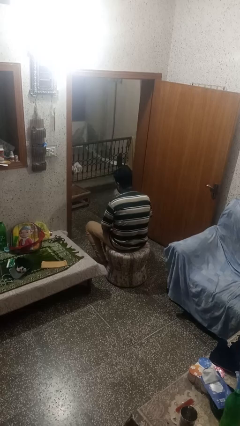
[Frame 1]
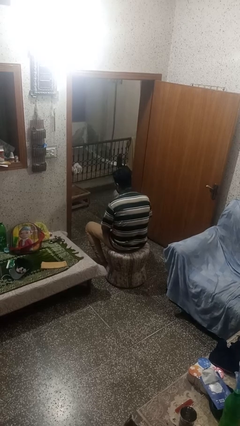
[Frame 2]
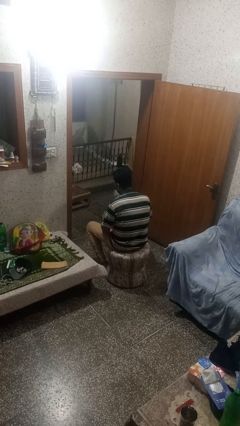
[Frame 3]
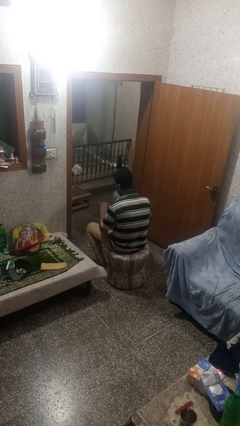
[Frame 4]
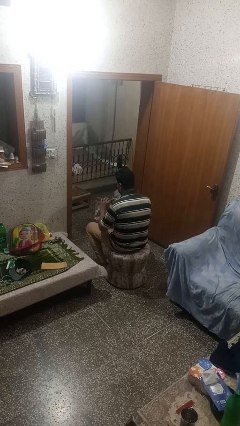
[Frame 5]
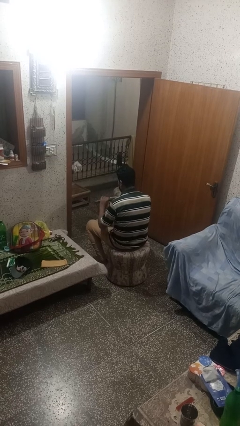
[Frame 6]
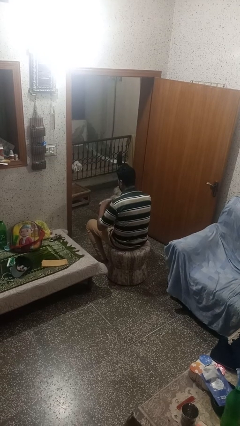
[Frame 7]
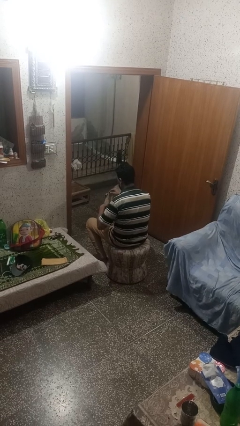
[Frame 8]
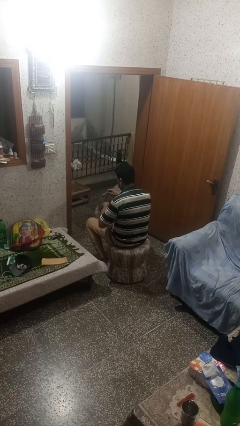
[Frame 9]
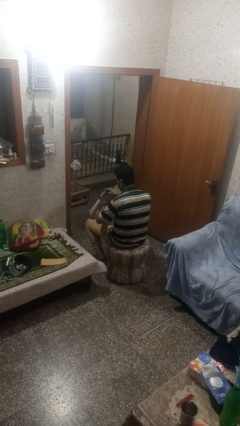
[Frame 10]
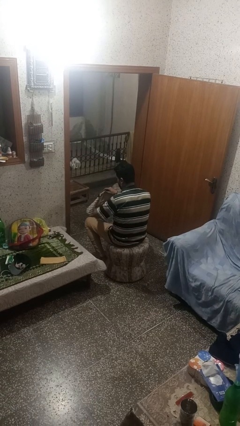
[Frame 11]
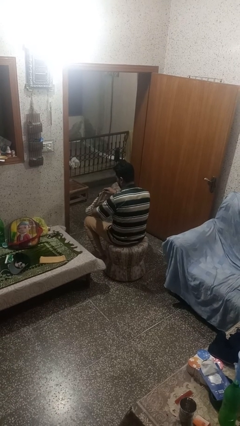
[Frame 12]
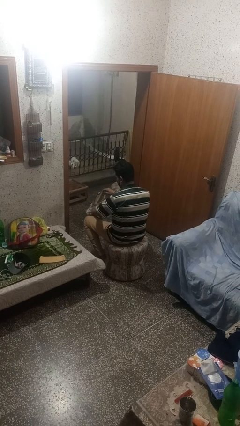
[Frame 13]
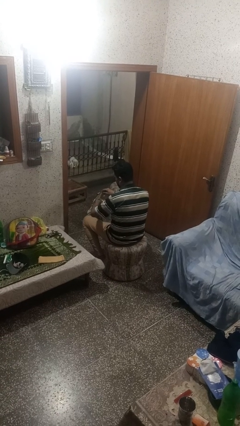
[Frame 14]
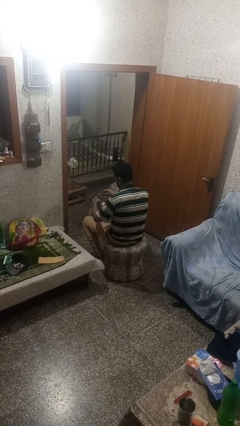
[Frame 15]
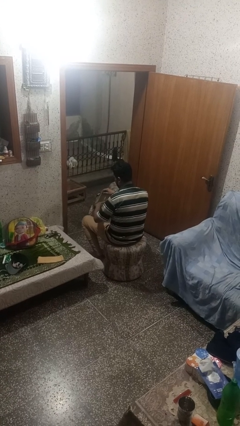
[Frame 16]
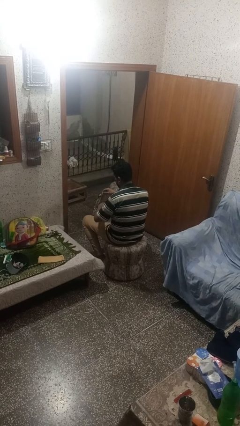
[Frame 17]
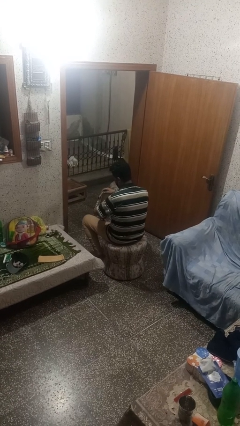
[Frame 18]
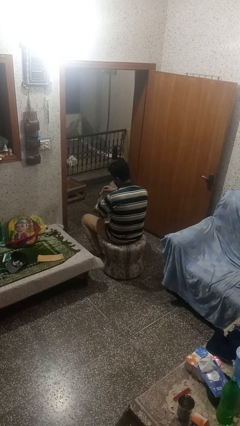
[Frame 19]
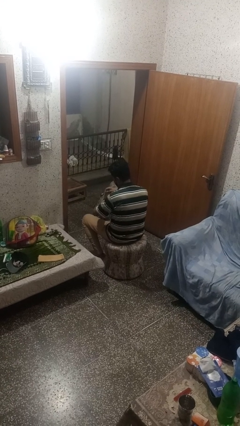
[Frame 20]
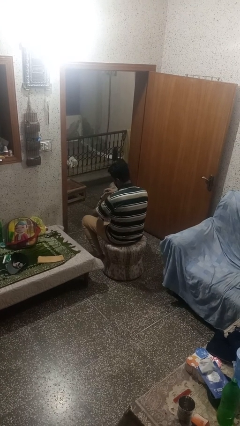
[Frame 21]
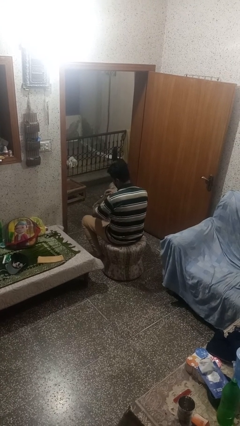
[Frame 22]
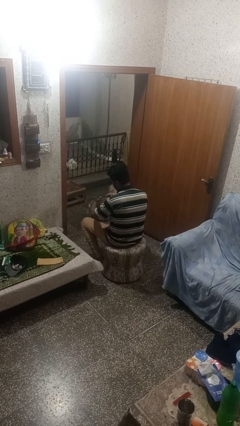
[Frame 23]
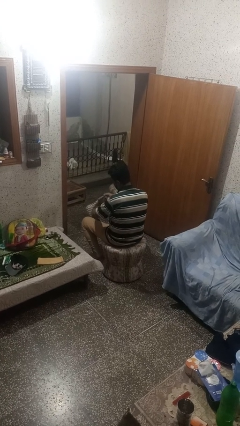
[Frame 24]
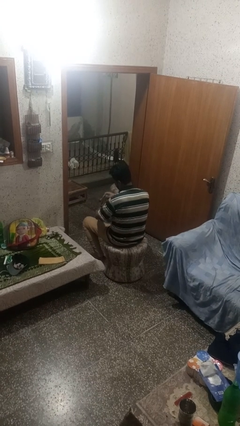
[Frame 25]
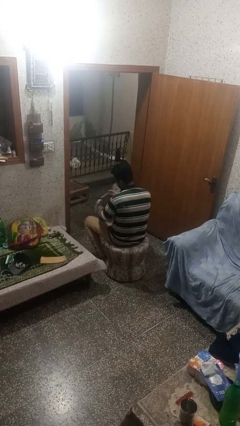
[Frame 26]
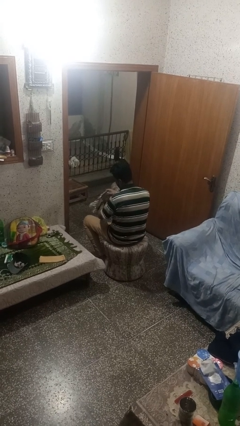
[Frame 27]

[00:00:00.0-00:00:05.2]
person searches in purse

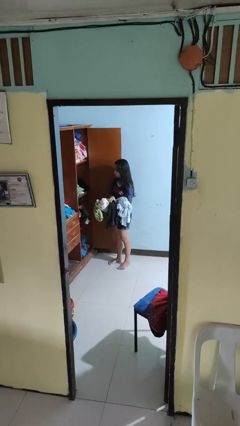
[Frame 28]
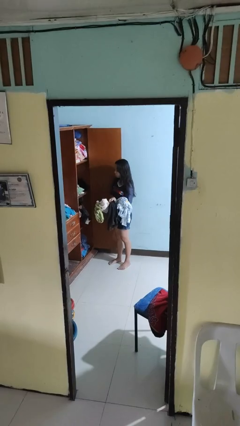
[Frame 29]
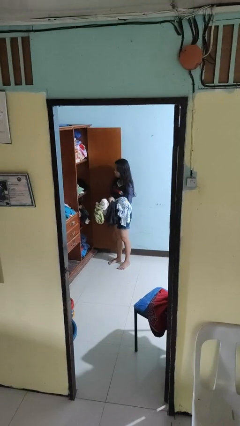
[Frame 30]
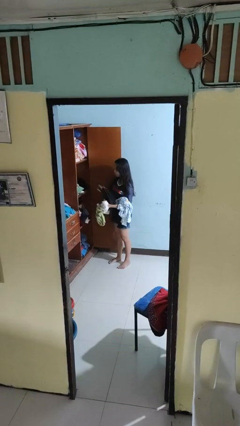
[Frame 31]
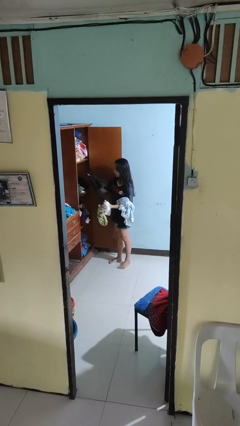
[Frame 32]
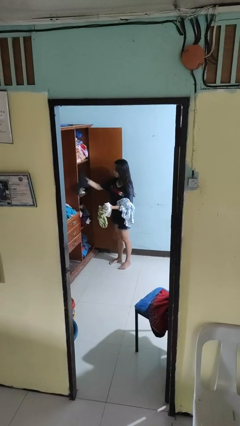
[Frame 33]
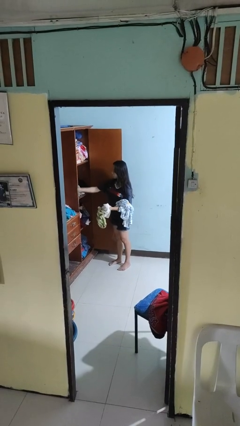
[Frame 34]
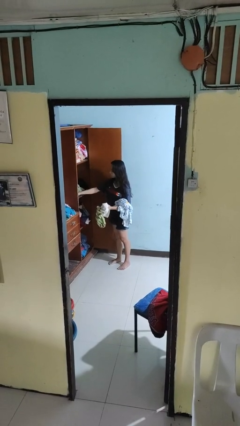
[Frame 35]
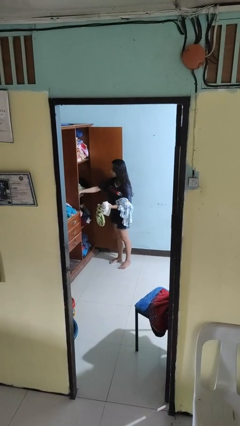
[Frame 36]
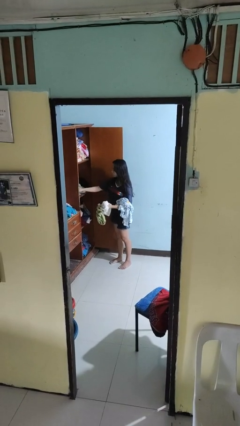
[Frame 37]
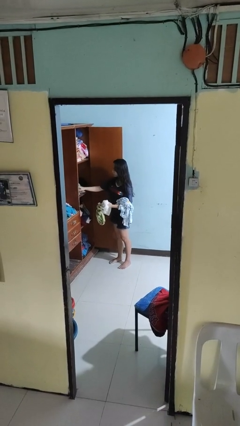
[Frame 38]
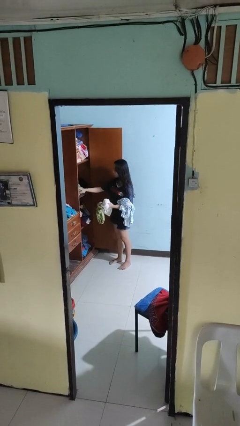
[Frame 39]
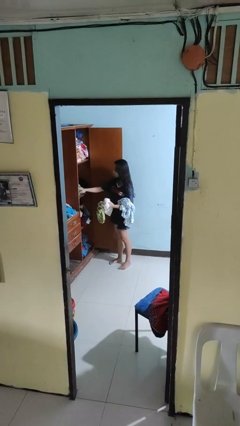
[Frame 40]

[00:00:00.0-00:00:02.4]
person puts clothes into dresser

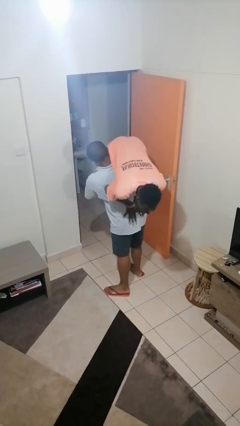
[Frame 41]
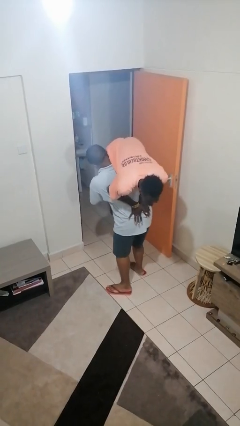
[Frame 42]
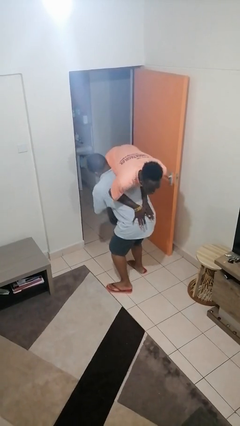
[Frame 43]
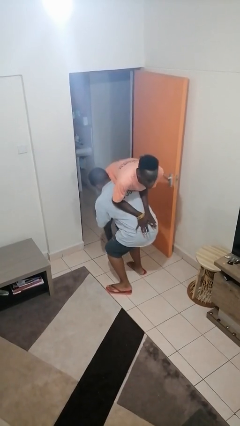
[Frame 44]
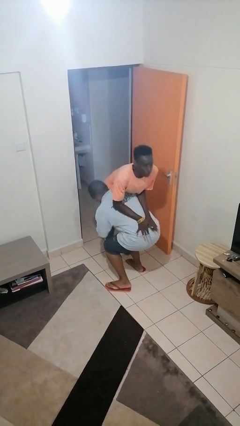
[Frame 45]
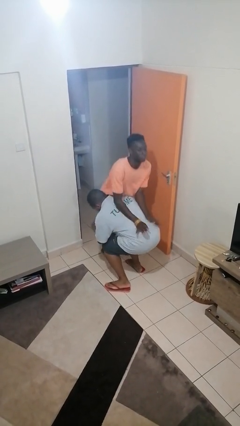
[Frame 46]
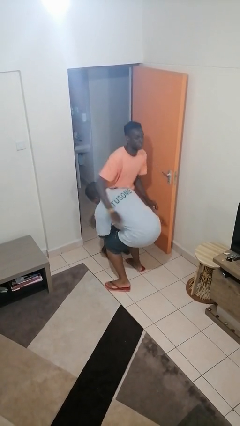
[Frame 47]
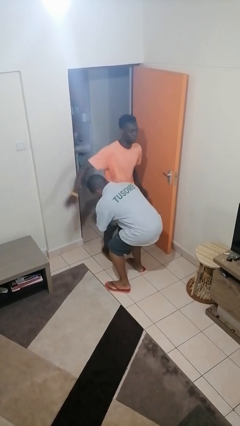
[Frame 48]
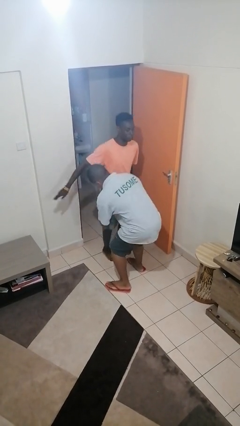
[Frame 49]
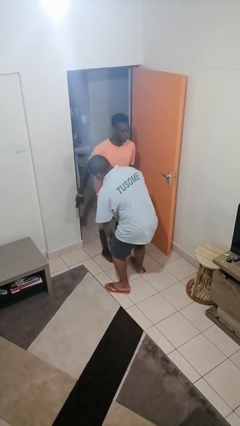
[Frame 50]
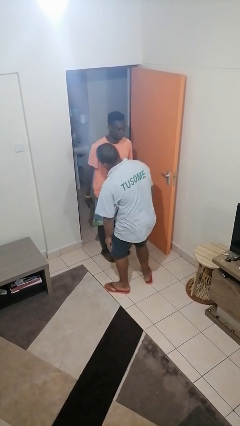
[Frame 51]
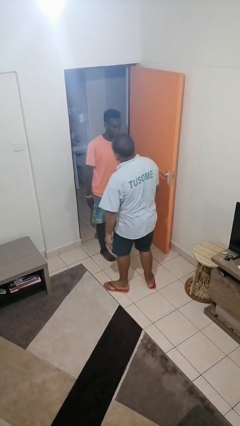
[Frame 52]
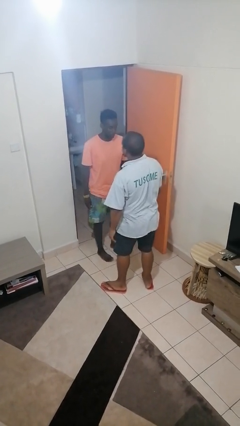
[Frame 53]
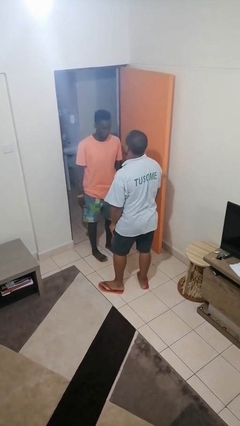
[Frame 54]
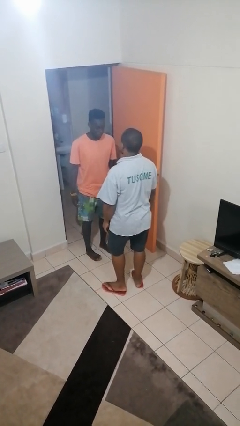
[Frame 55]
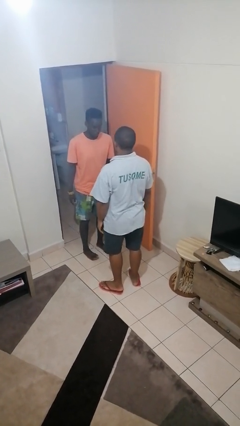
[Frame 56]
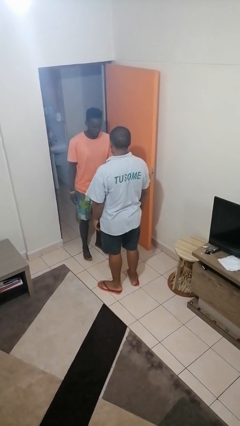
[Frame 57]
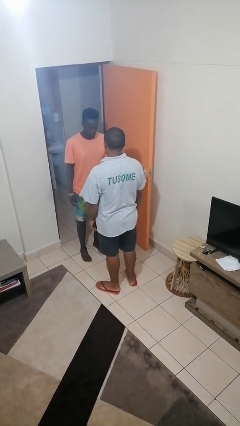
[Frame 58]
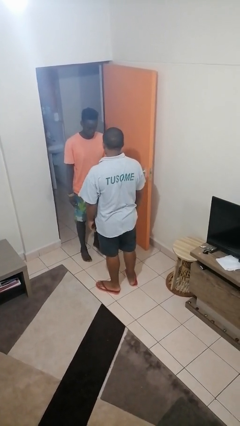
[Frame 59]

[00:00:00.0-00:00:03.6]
person puts down person

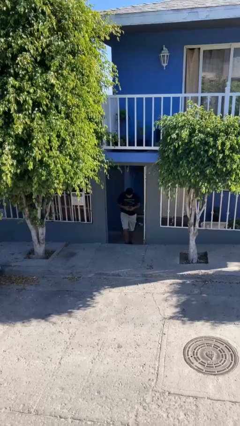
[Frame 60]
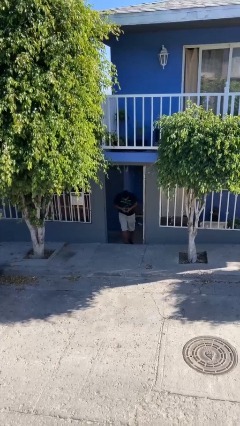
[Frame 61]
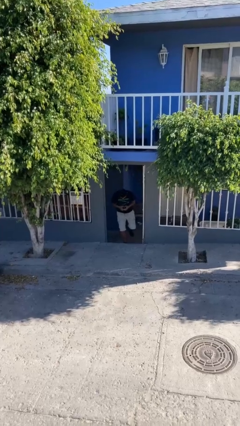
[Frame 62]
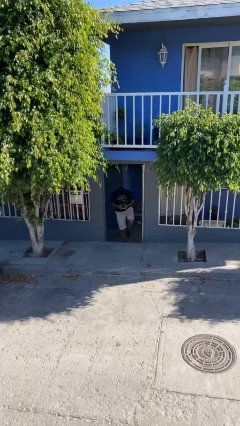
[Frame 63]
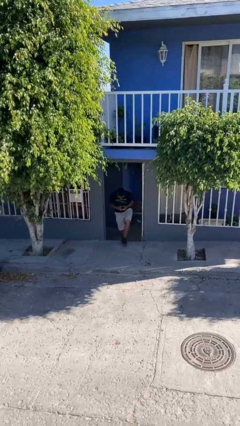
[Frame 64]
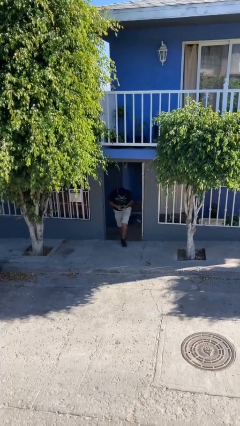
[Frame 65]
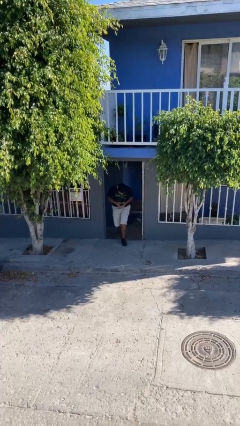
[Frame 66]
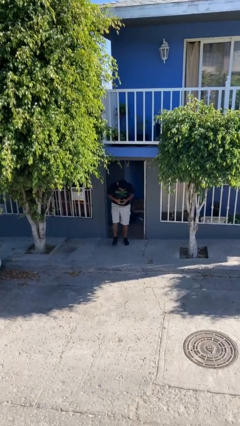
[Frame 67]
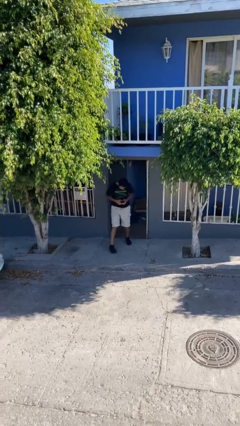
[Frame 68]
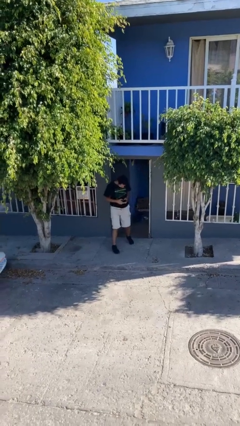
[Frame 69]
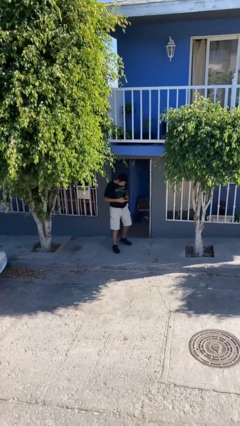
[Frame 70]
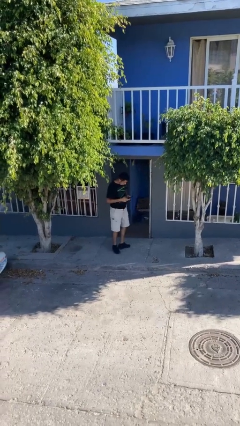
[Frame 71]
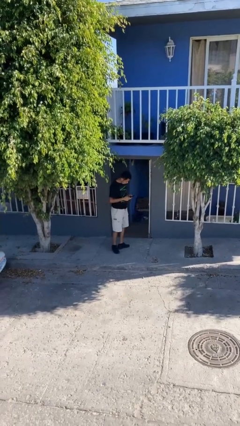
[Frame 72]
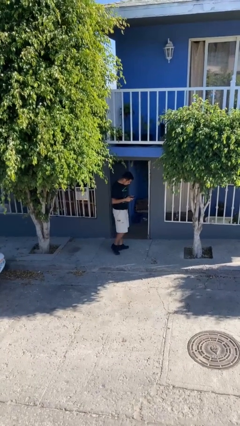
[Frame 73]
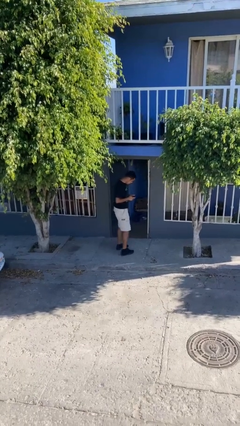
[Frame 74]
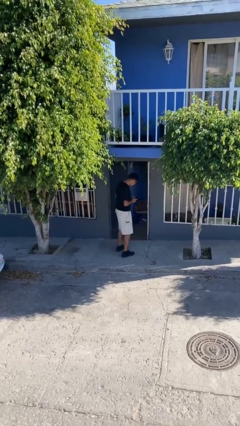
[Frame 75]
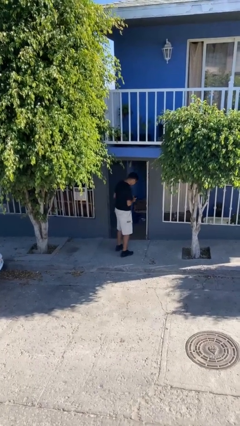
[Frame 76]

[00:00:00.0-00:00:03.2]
person enters scene through structure

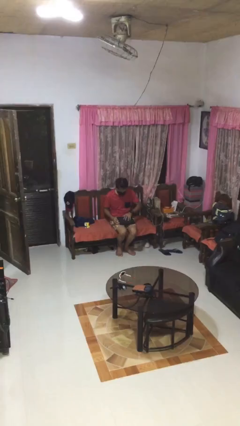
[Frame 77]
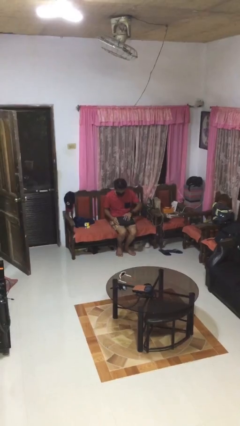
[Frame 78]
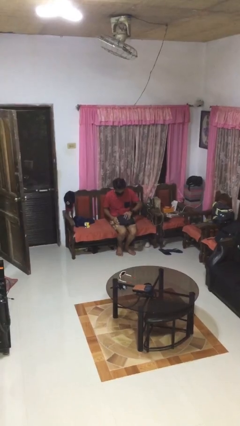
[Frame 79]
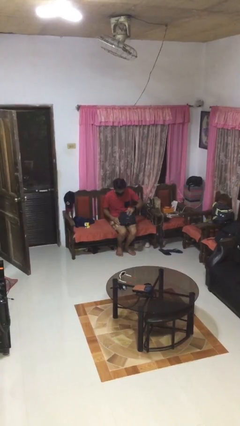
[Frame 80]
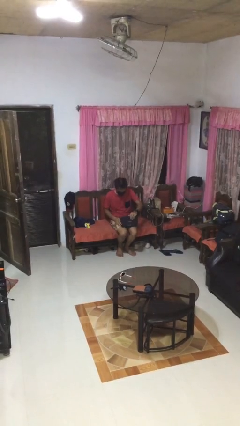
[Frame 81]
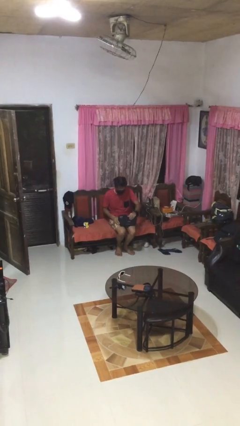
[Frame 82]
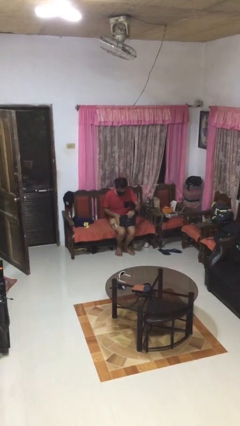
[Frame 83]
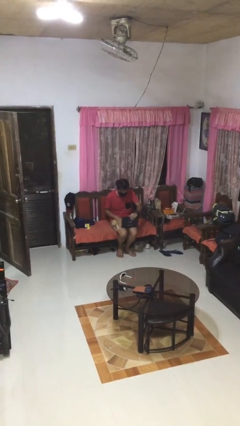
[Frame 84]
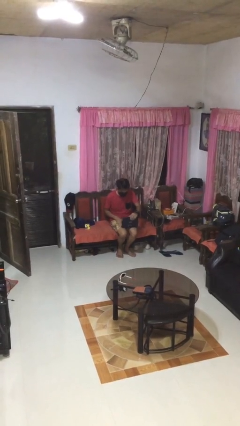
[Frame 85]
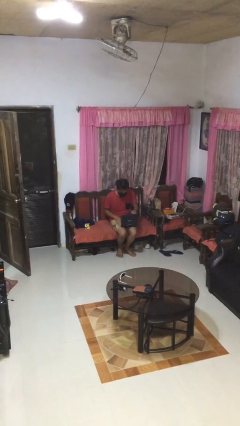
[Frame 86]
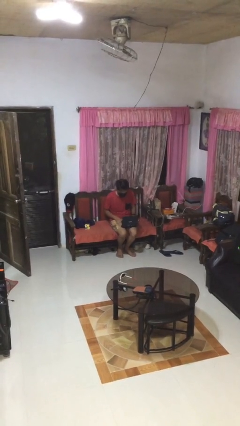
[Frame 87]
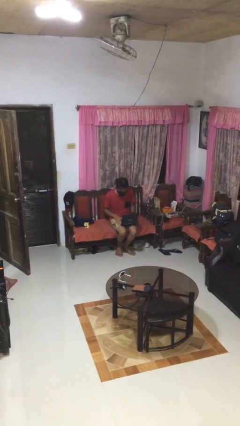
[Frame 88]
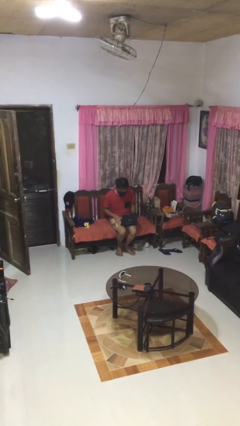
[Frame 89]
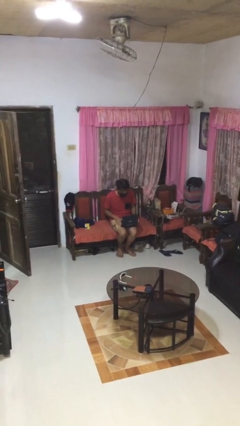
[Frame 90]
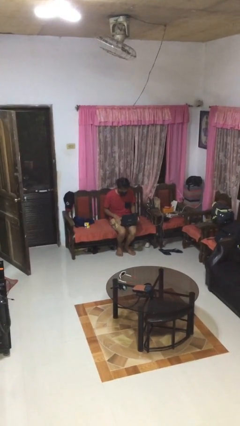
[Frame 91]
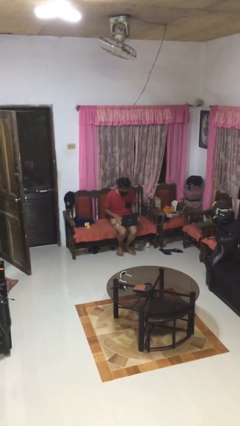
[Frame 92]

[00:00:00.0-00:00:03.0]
person opens laptop

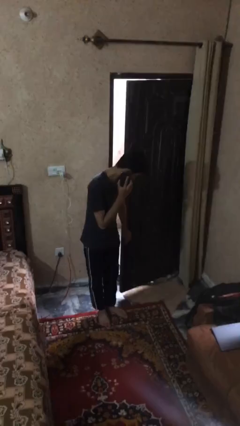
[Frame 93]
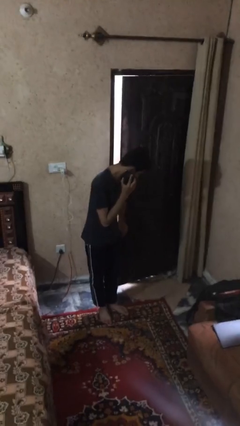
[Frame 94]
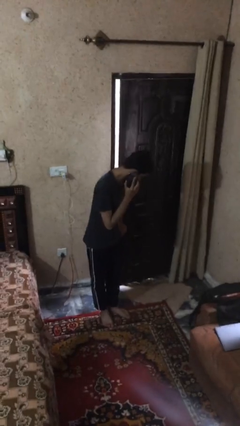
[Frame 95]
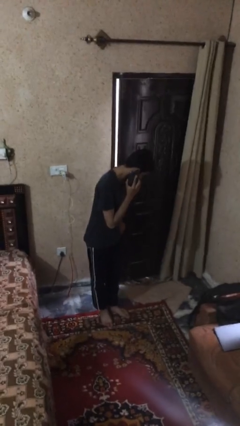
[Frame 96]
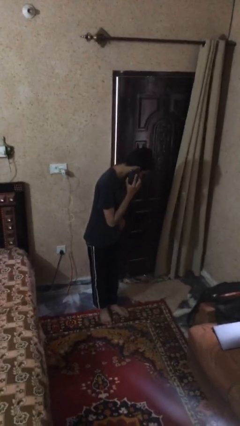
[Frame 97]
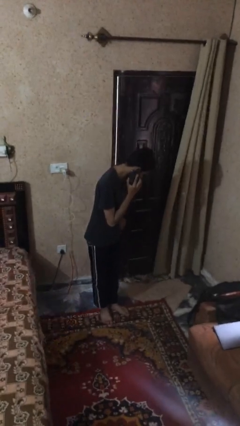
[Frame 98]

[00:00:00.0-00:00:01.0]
person closes facility door
